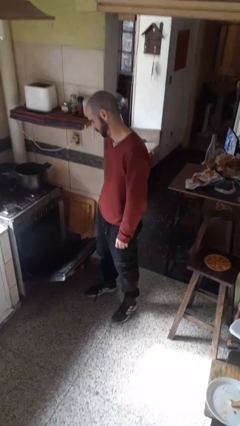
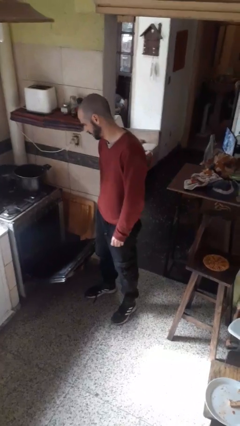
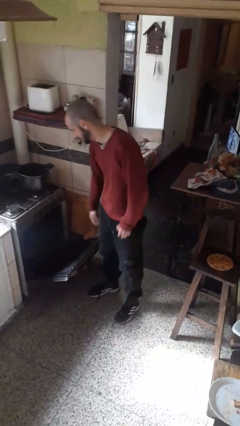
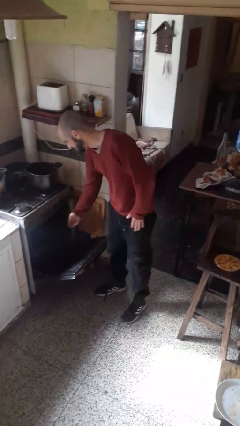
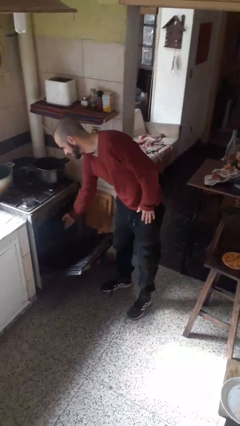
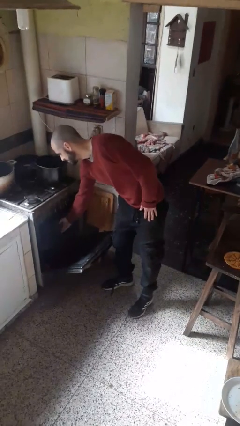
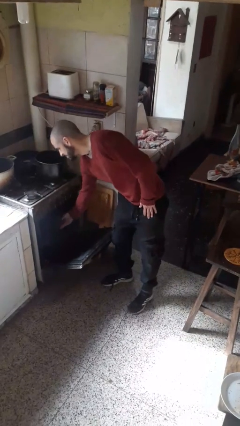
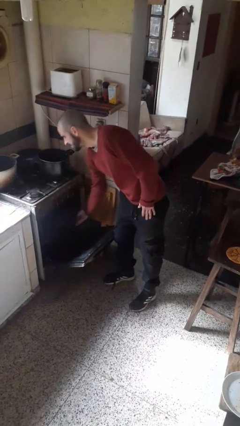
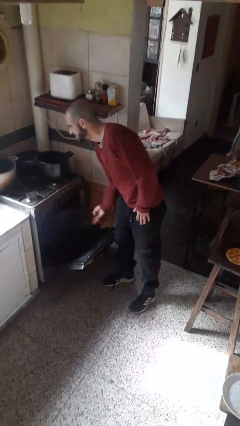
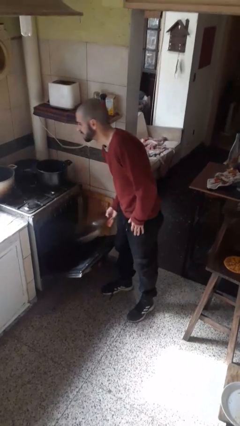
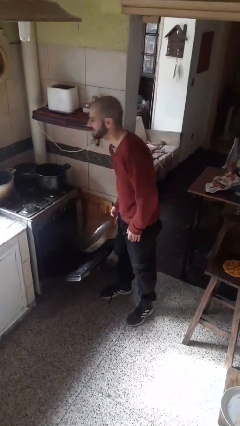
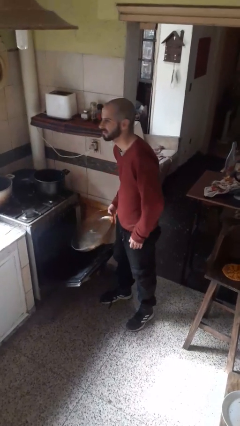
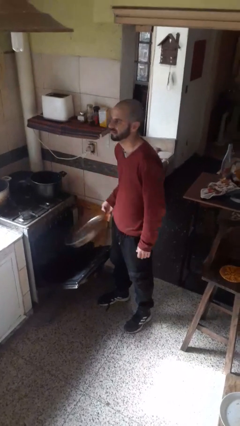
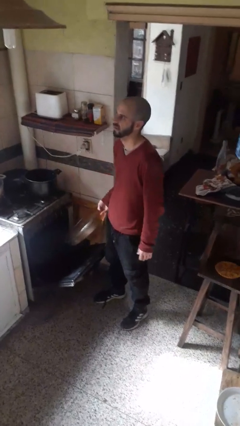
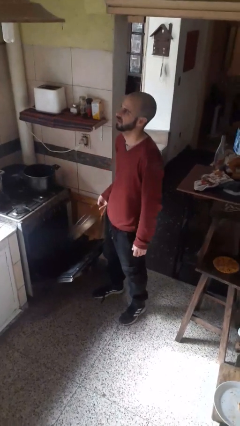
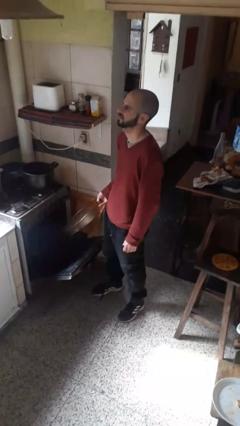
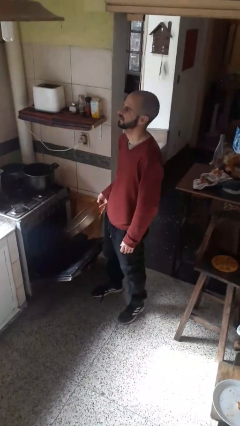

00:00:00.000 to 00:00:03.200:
person takes object from oven

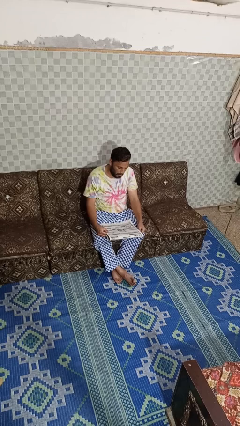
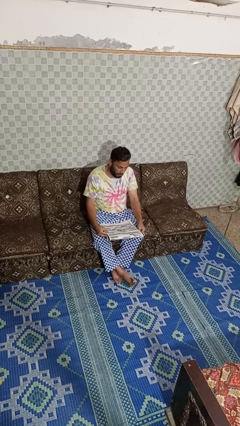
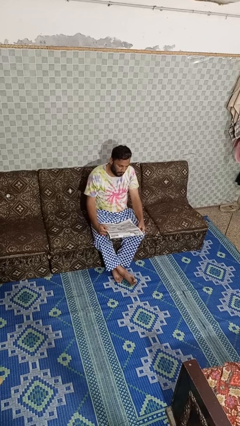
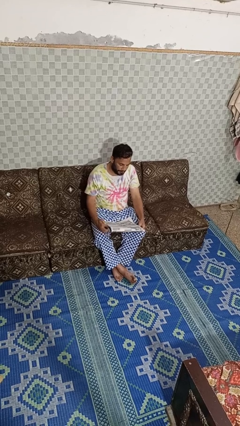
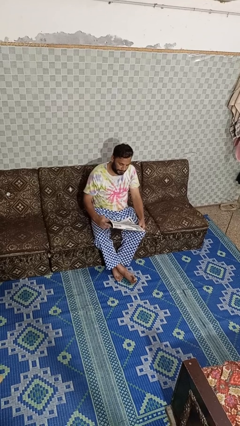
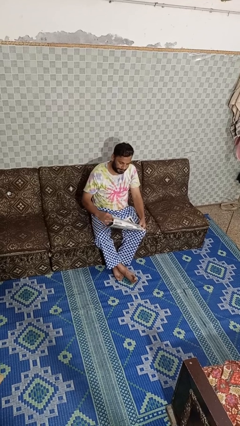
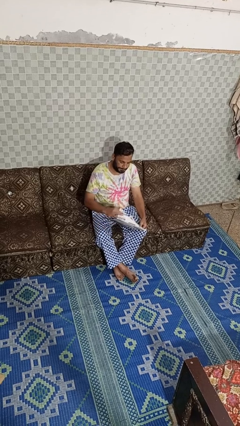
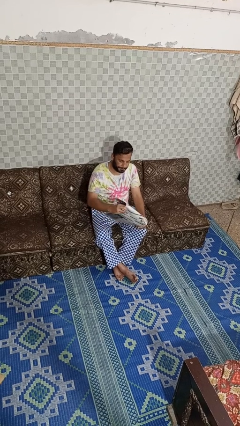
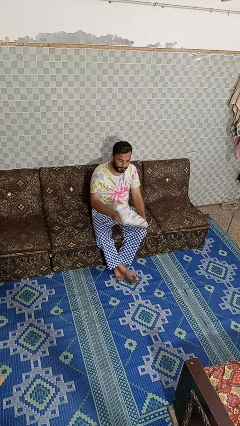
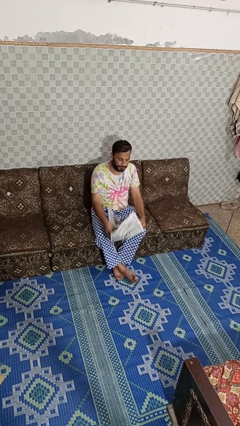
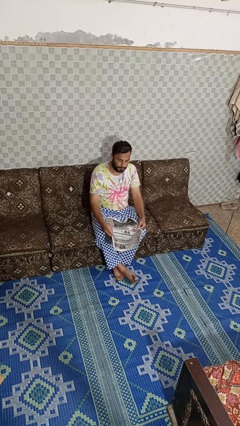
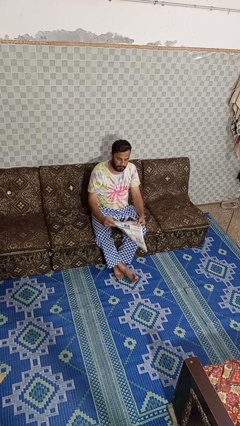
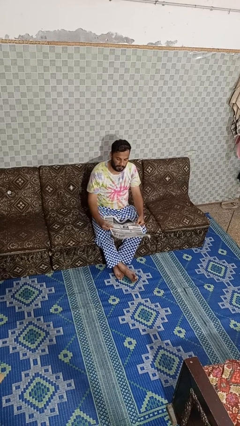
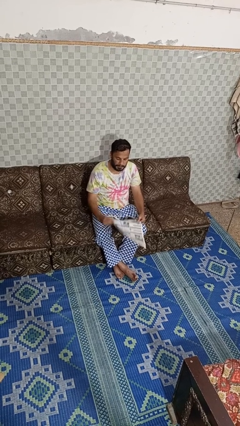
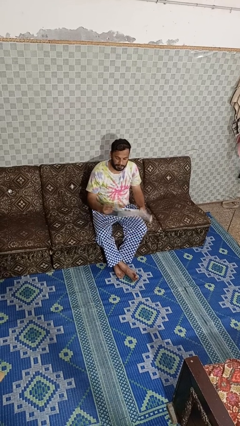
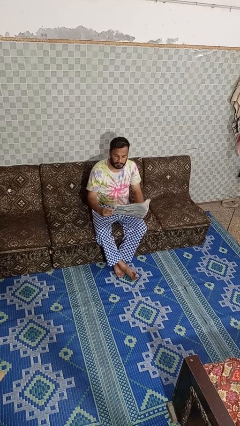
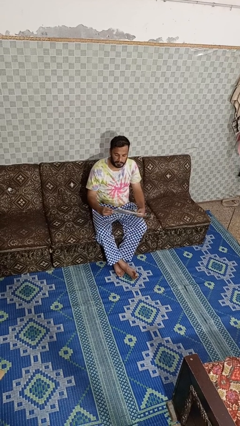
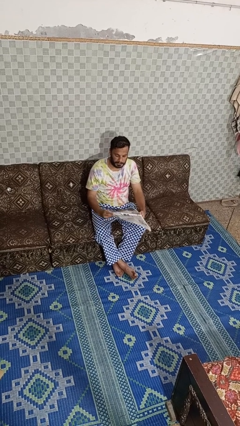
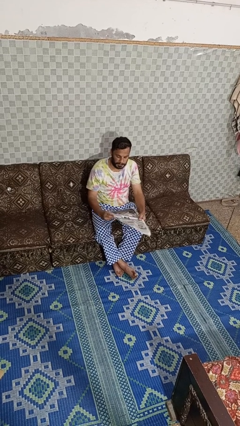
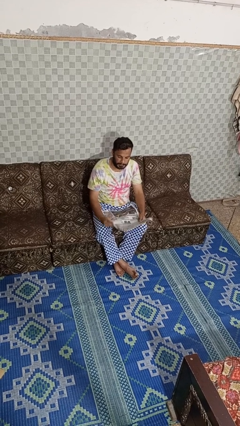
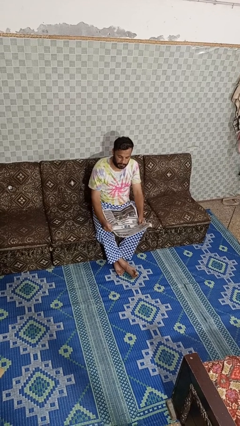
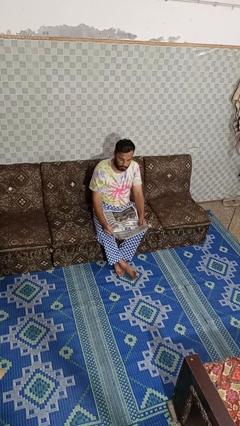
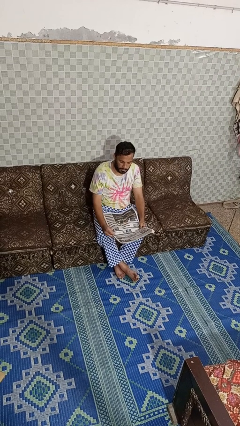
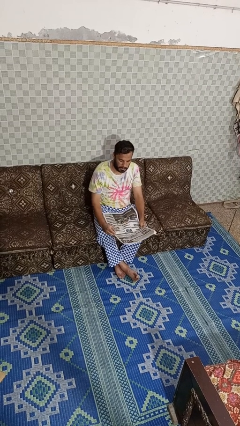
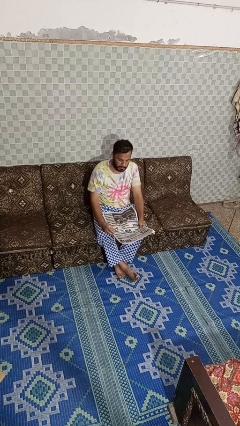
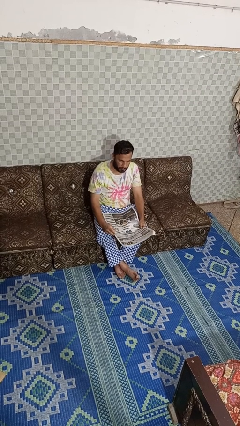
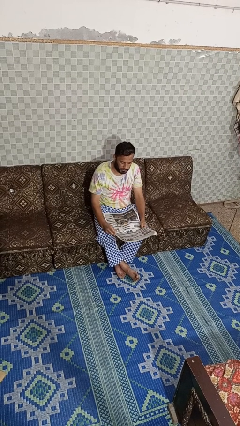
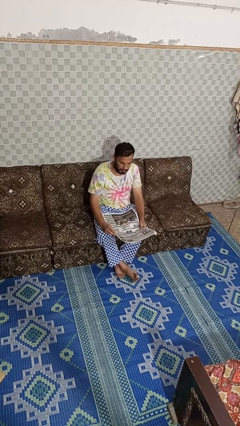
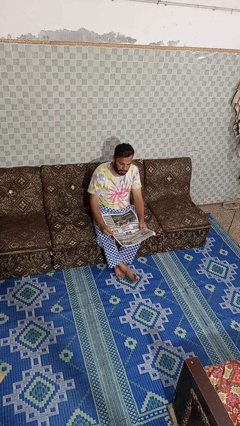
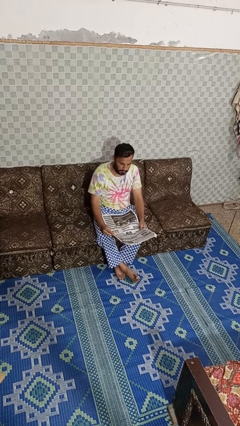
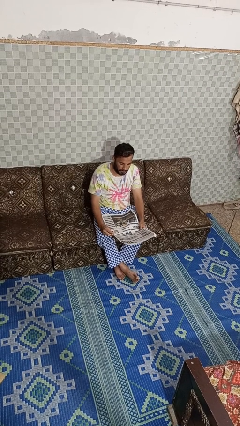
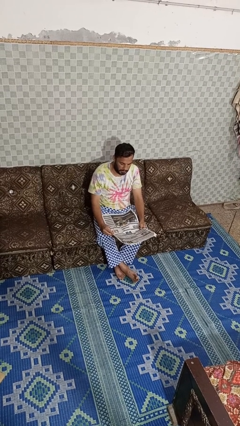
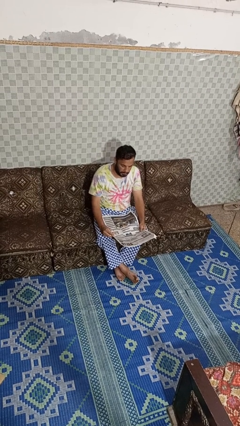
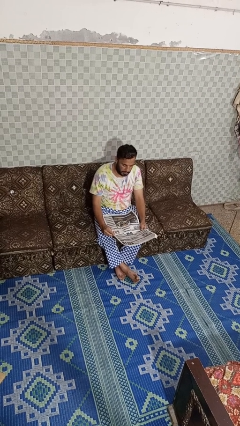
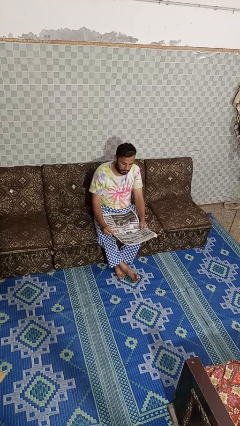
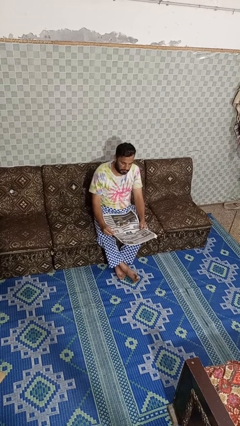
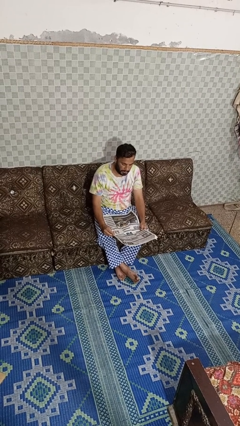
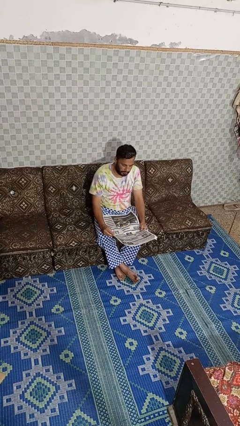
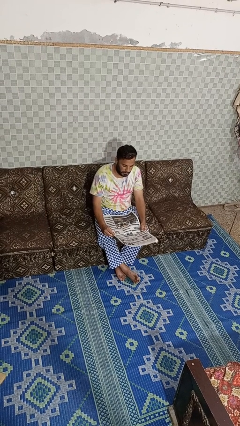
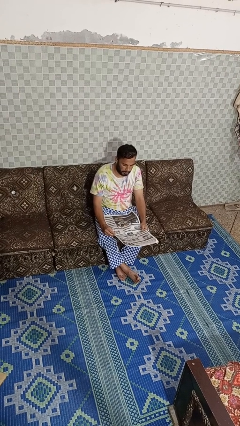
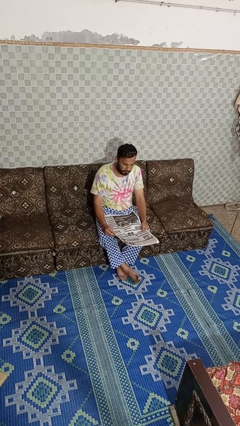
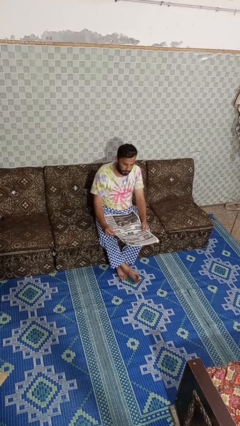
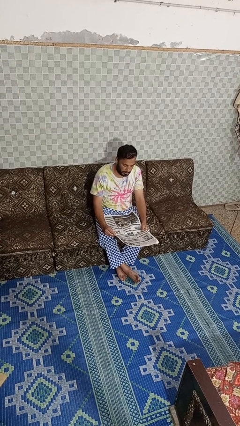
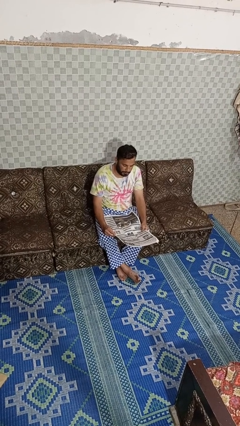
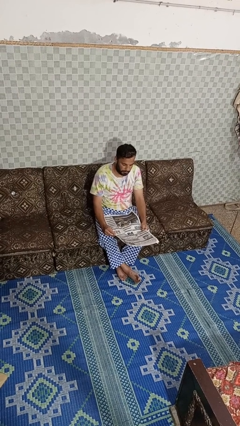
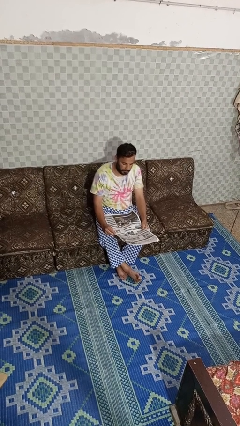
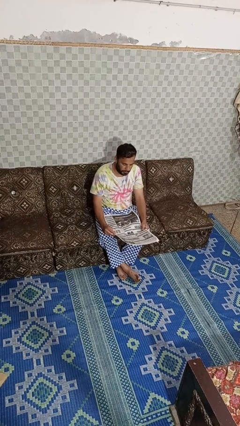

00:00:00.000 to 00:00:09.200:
person reads newspaper

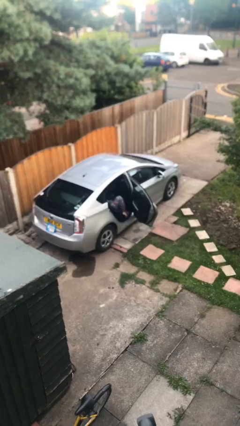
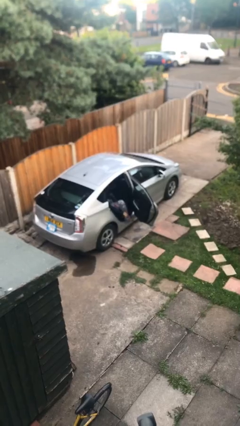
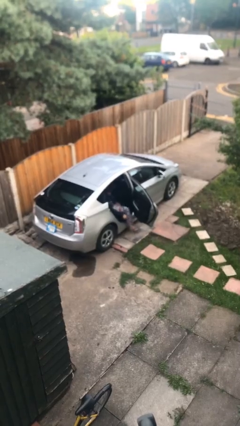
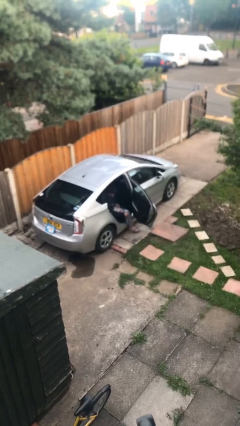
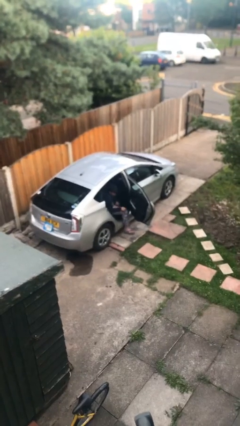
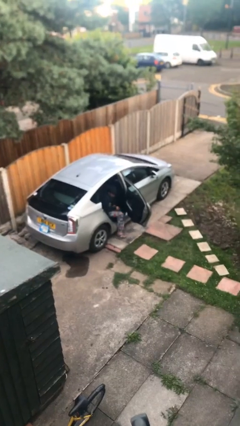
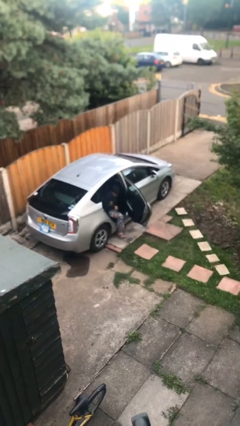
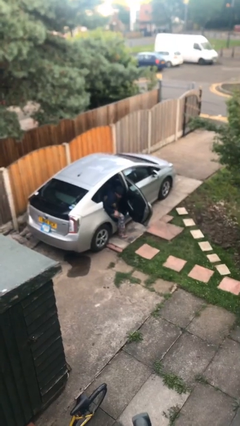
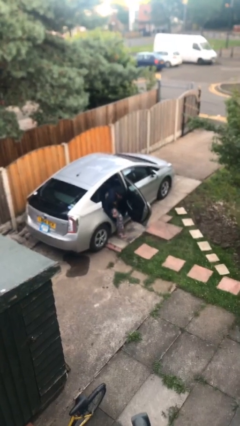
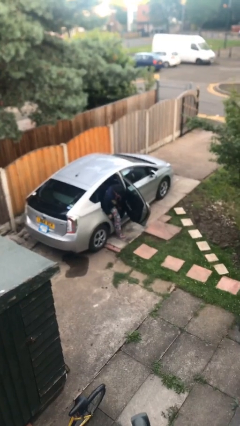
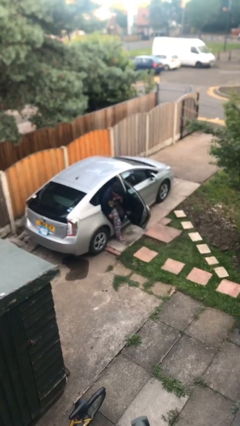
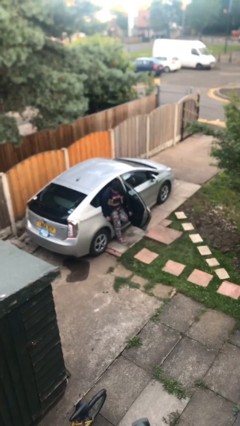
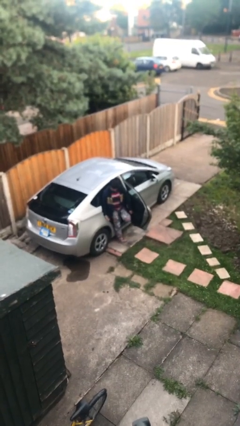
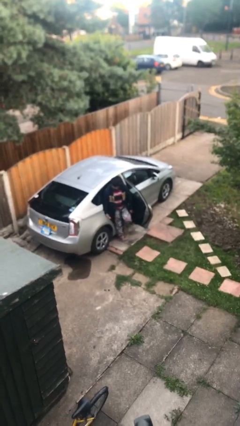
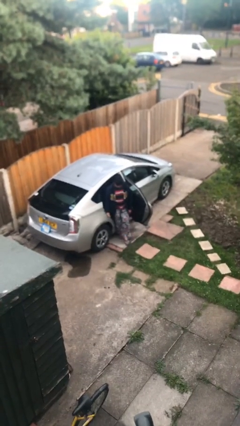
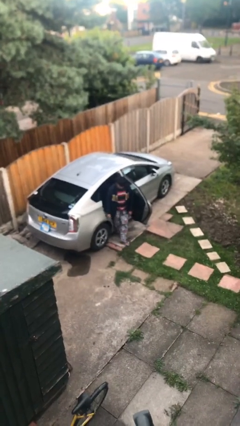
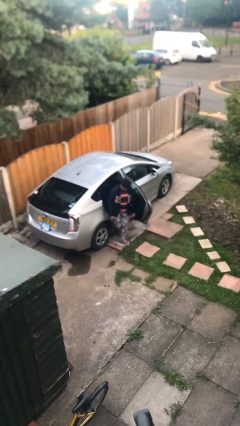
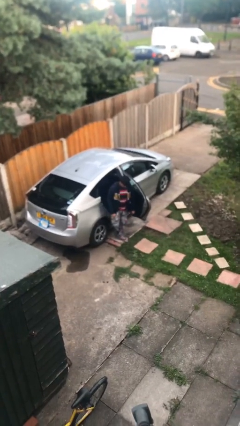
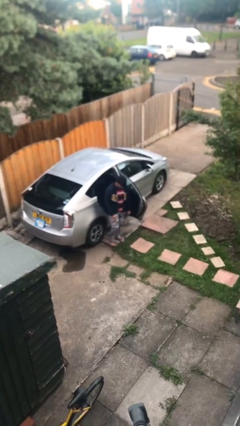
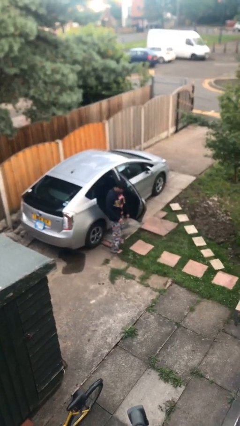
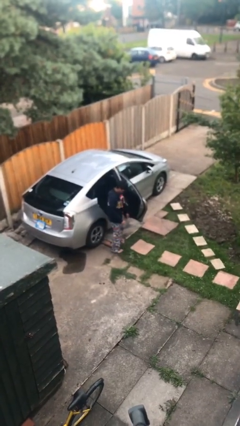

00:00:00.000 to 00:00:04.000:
person exits car

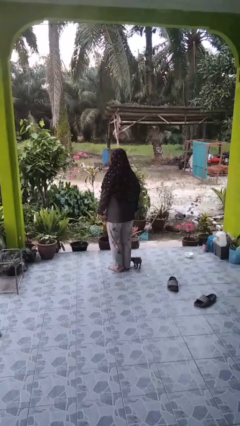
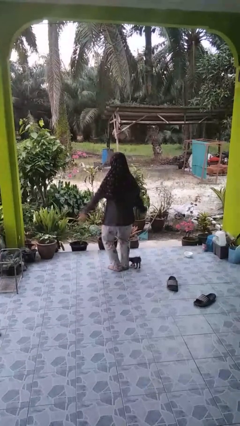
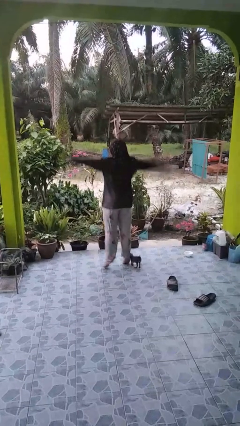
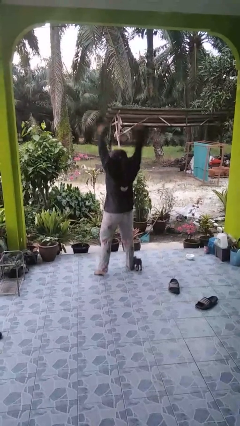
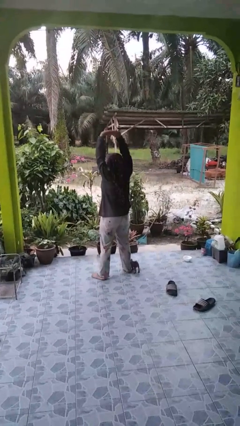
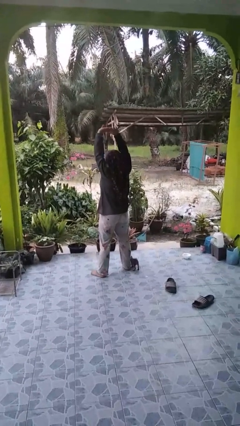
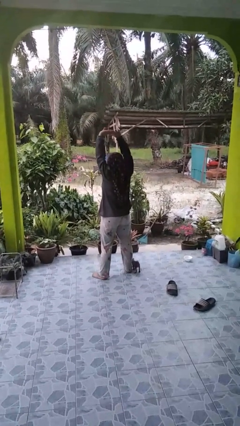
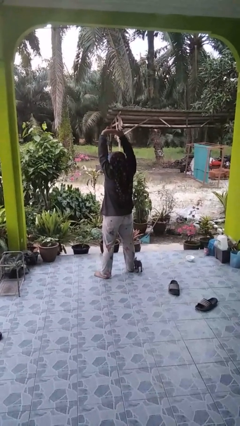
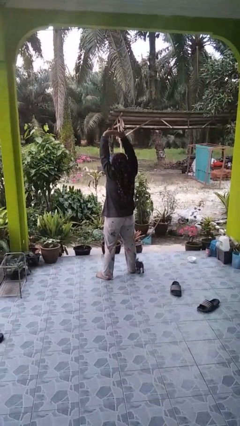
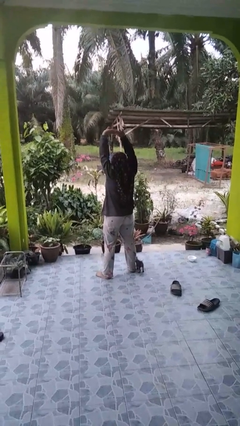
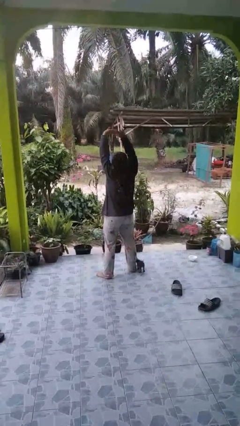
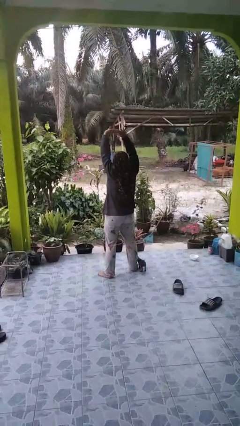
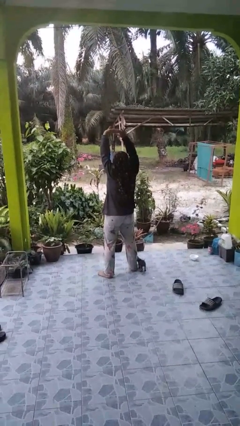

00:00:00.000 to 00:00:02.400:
person exercises with jumping jacks
